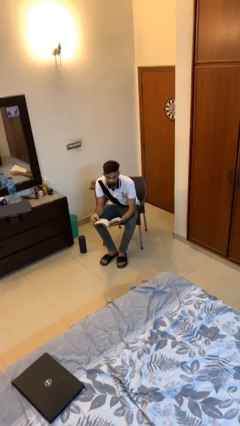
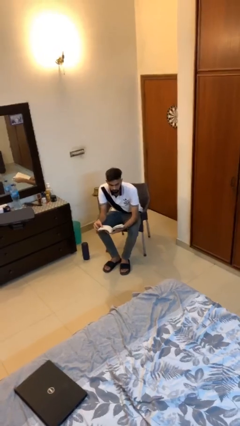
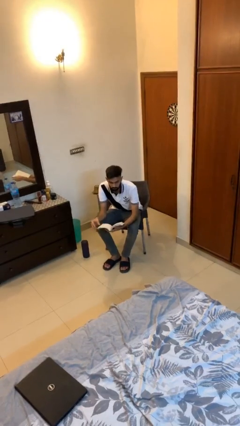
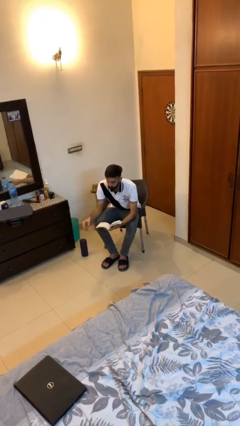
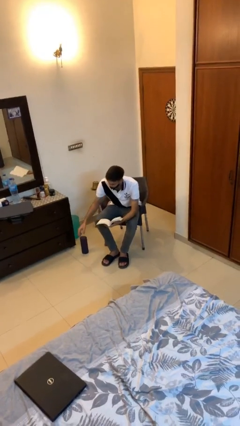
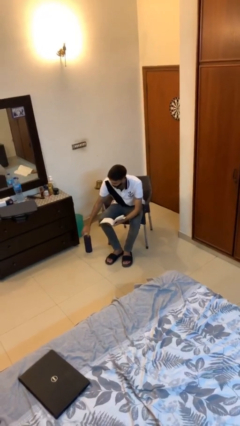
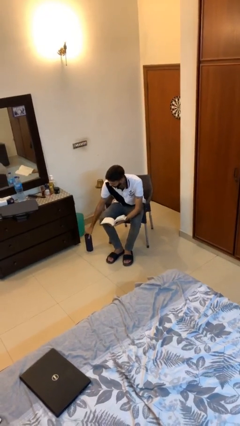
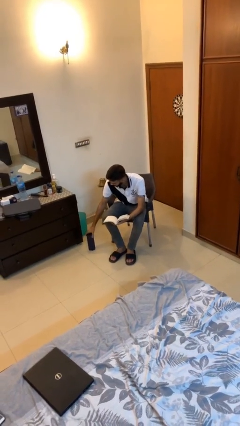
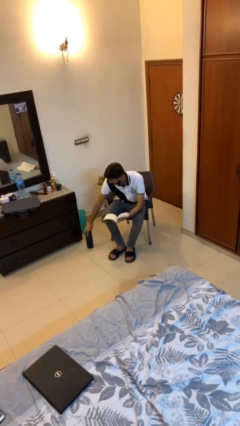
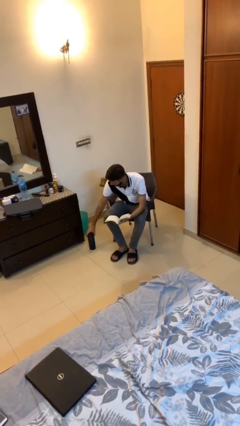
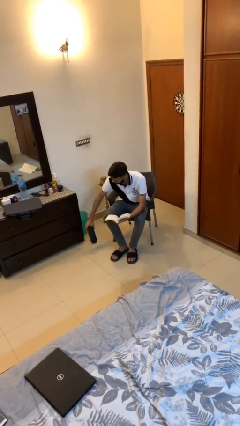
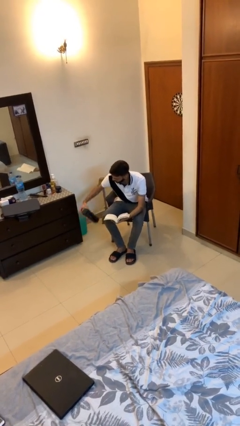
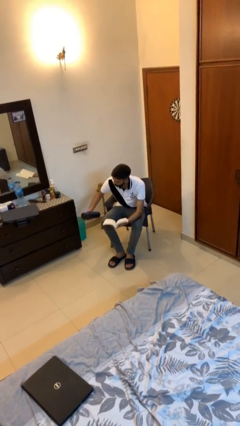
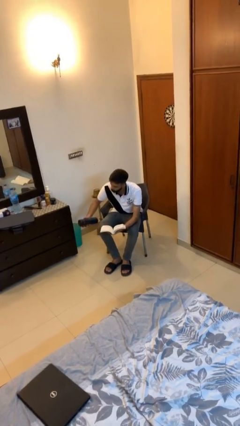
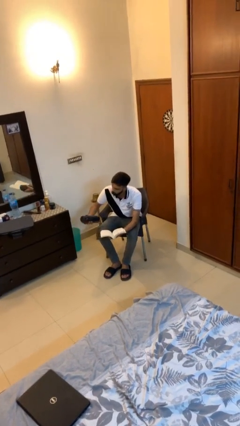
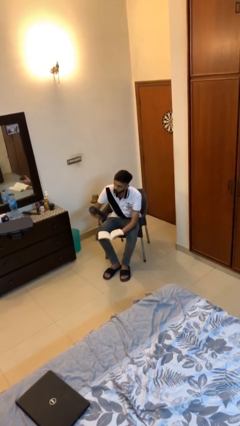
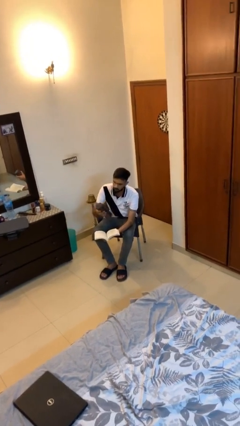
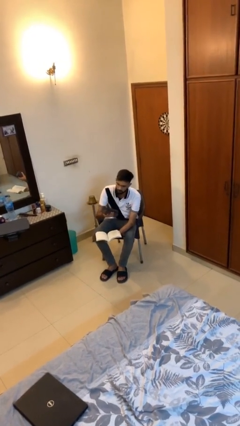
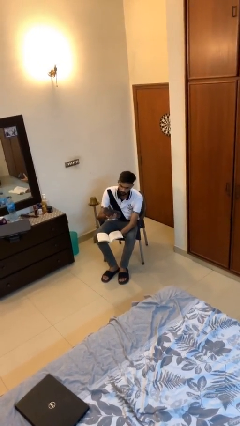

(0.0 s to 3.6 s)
person picks up object from floor

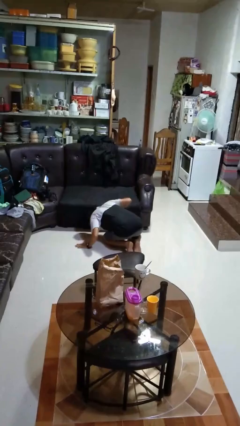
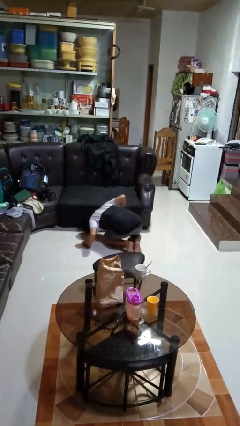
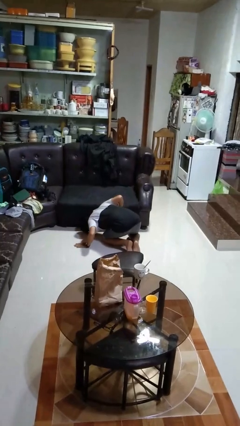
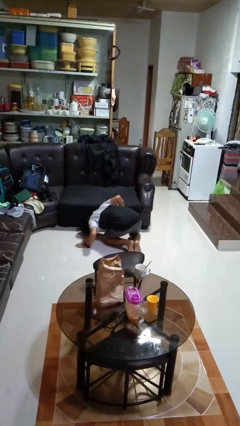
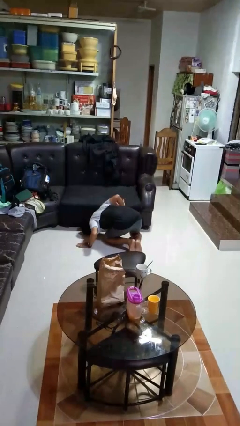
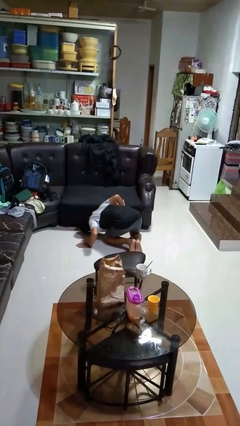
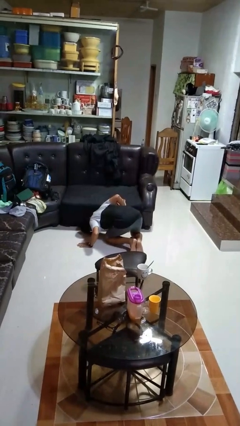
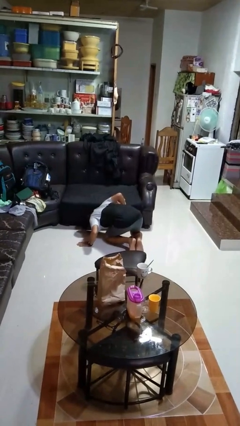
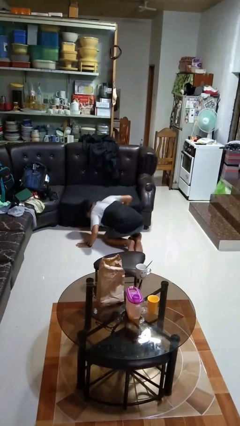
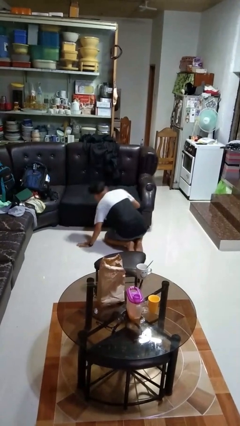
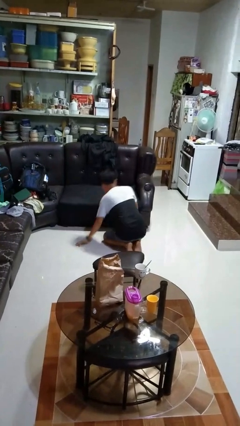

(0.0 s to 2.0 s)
person searches under couch

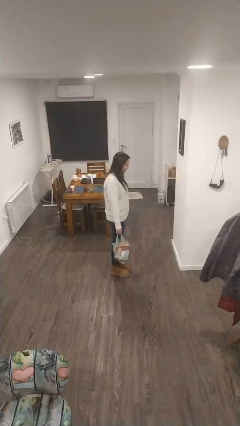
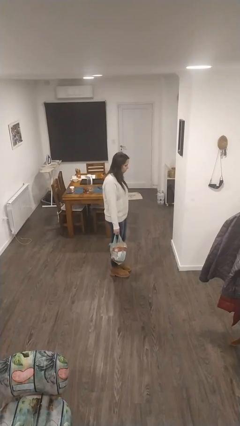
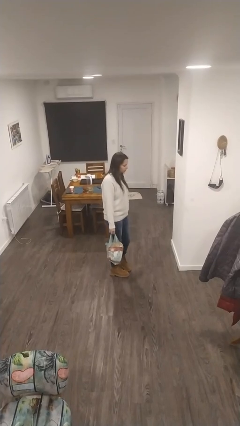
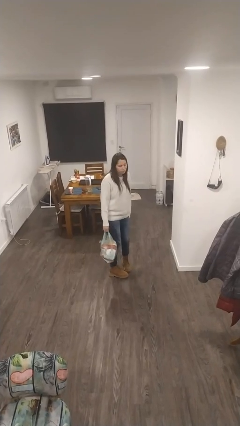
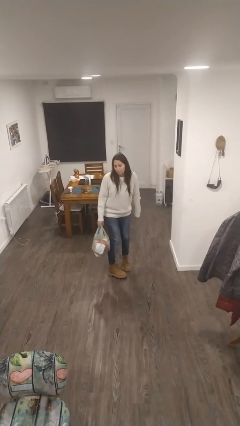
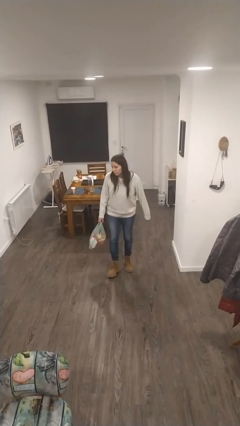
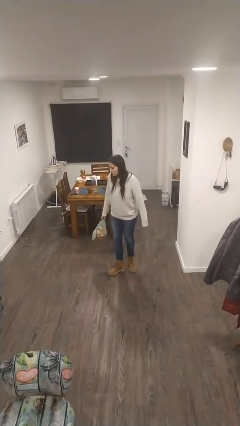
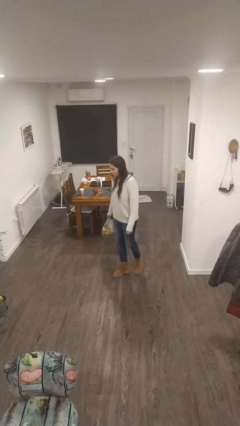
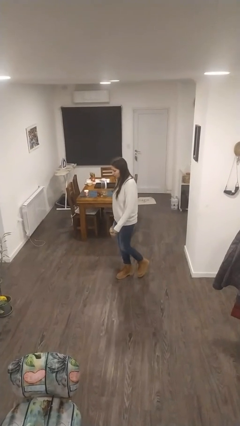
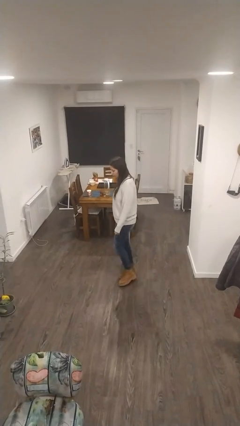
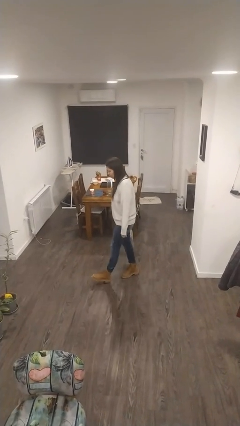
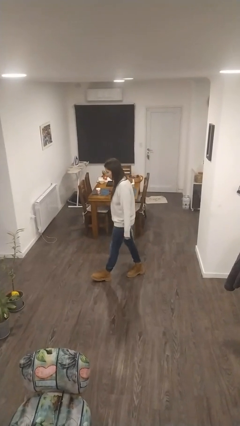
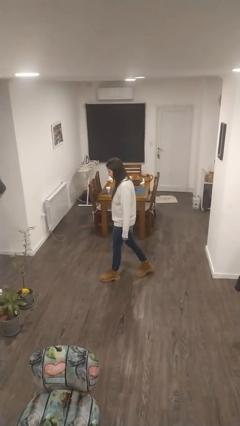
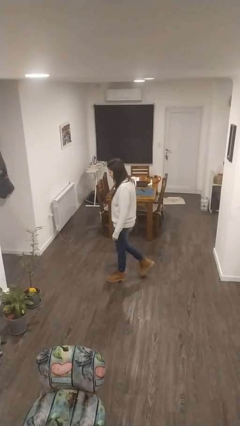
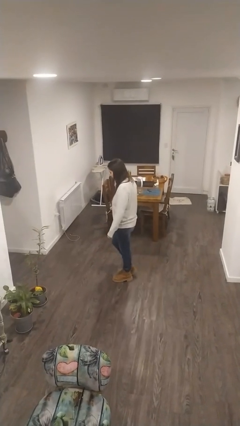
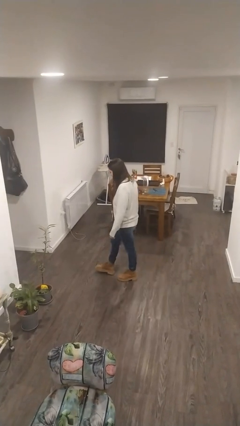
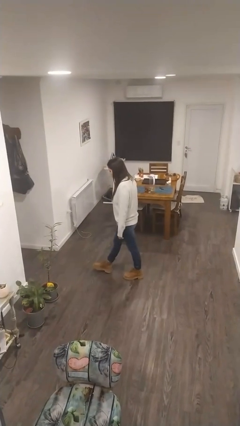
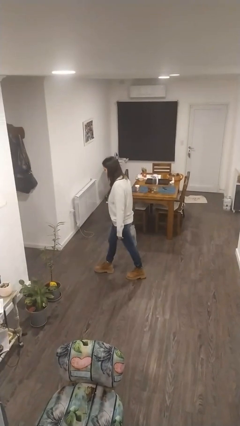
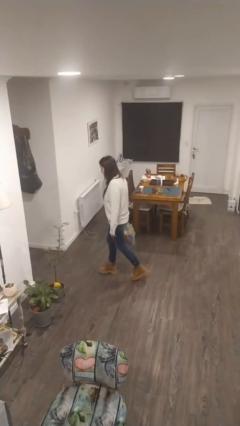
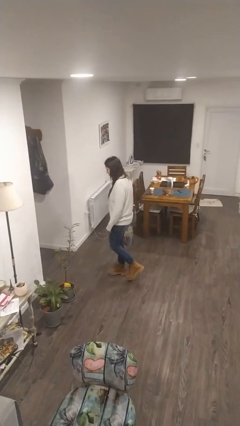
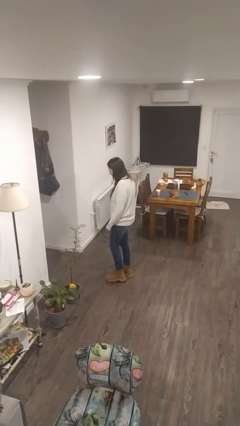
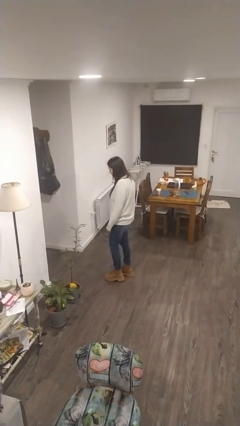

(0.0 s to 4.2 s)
person carries groceries

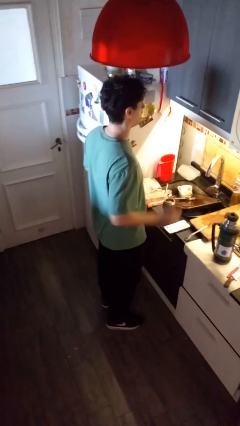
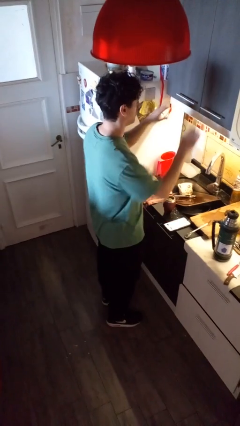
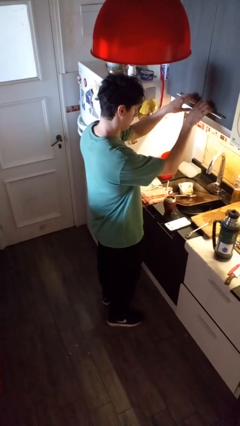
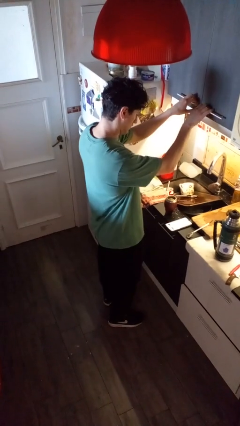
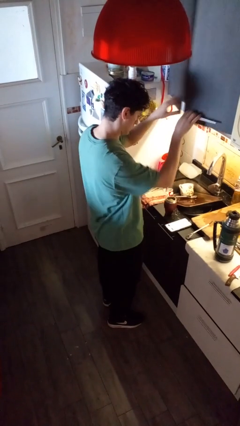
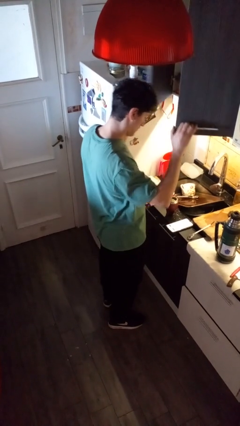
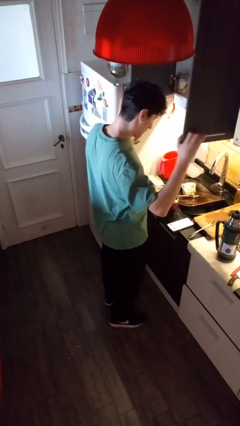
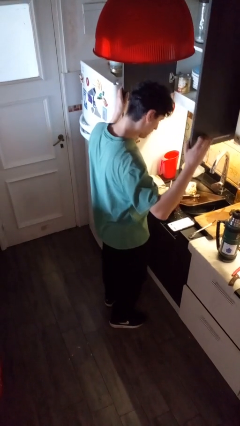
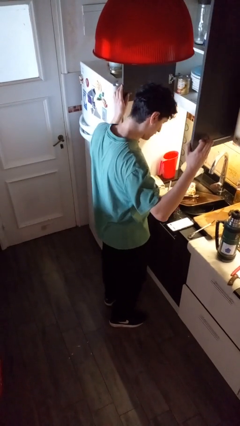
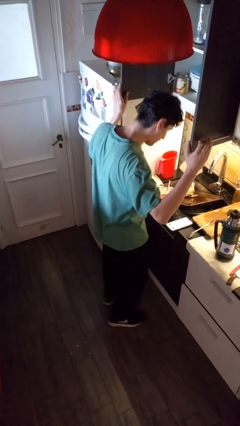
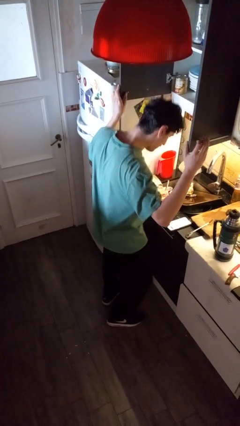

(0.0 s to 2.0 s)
person opens kitchen drawer

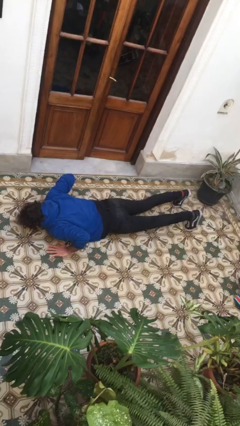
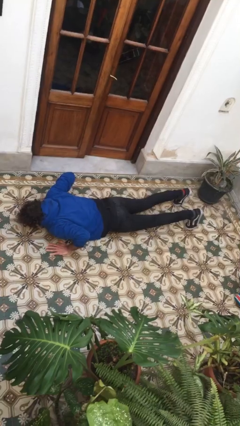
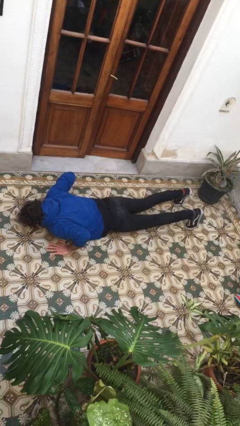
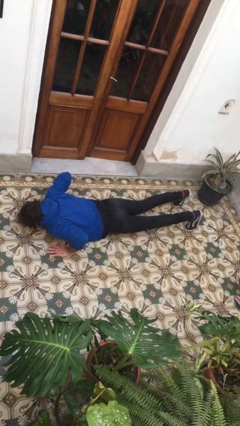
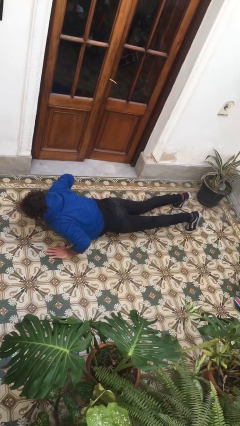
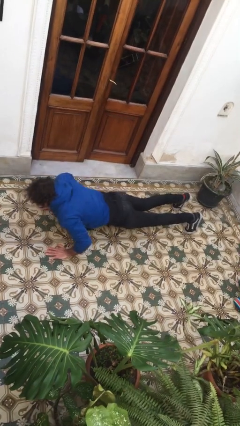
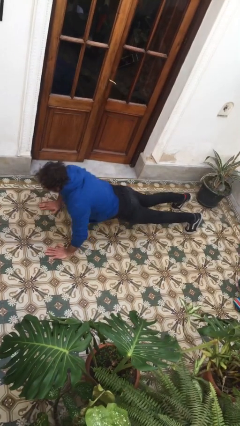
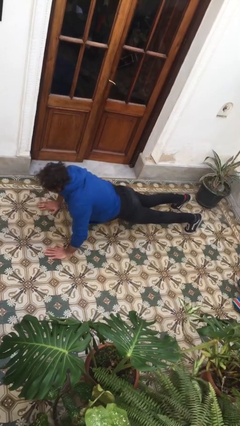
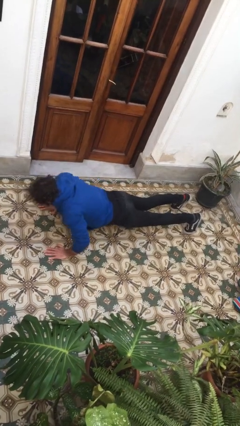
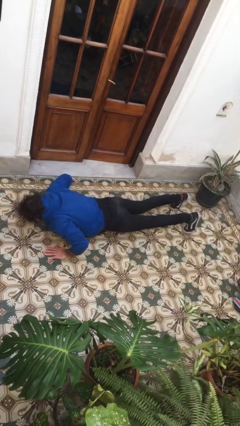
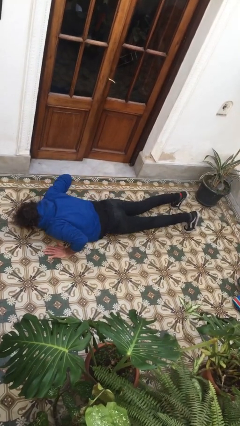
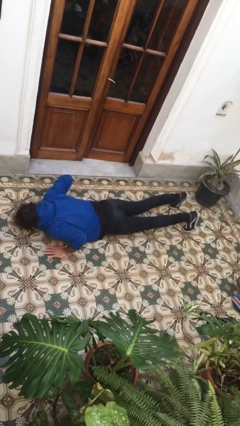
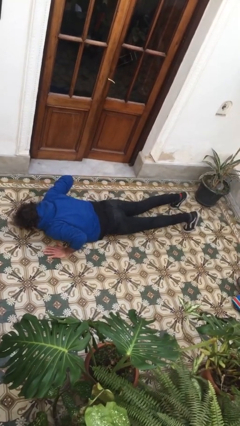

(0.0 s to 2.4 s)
person exercises with pushup

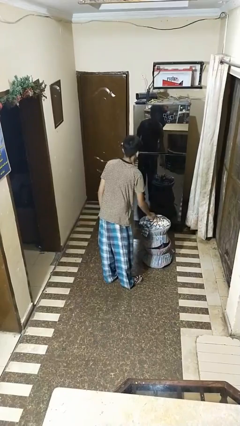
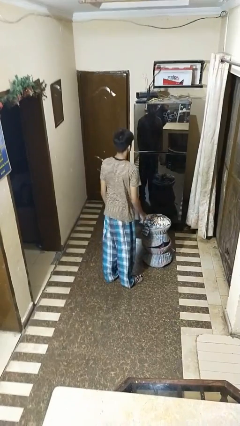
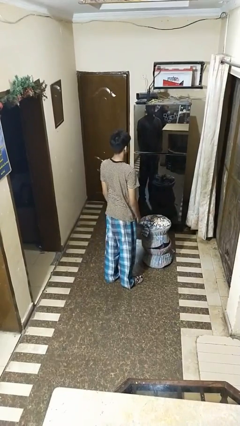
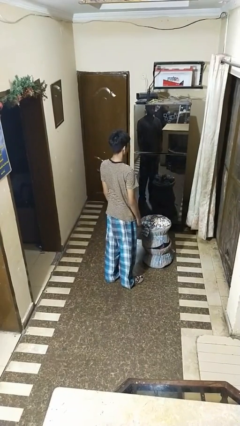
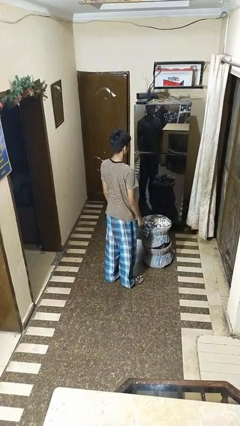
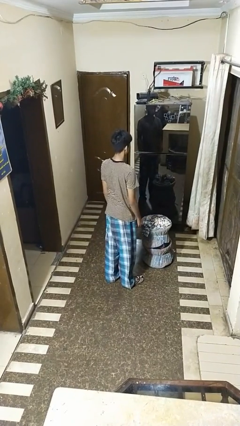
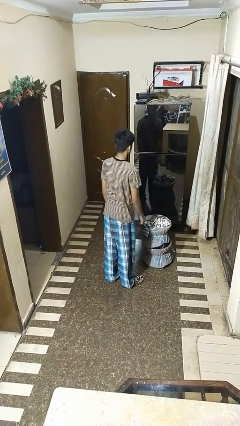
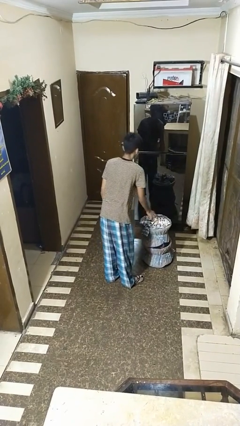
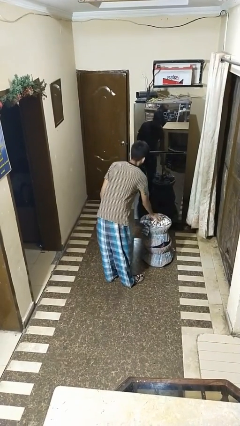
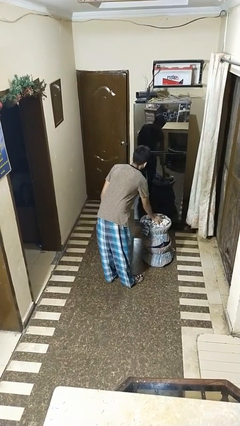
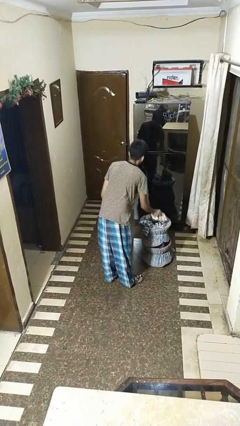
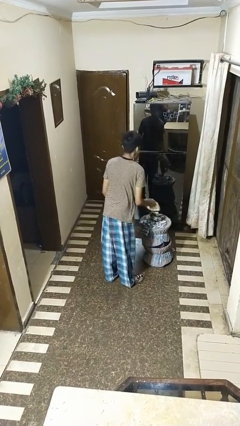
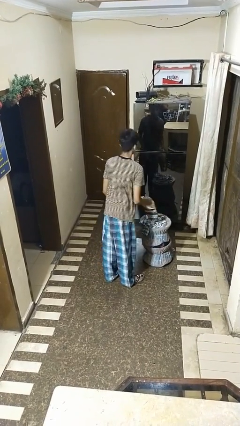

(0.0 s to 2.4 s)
person takes object from basket

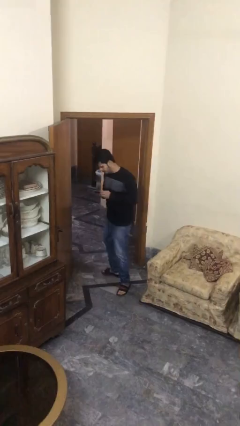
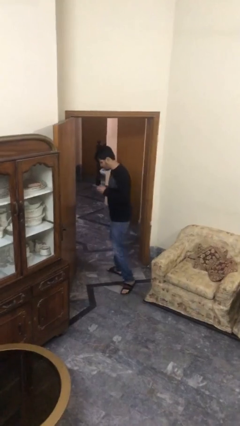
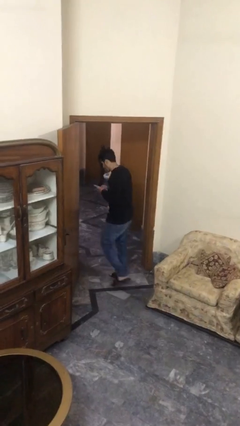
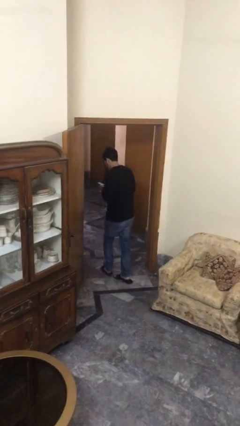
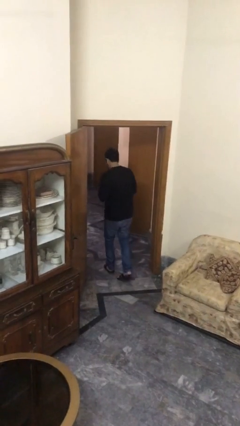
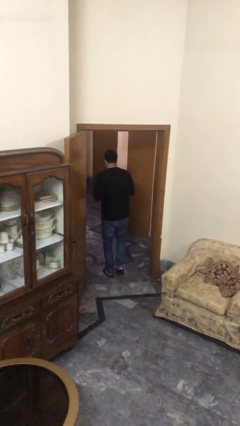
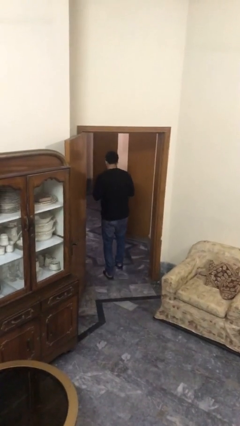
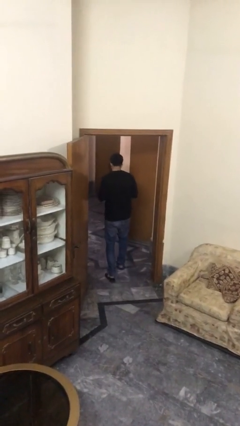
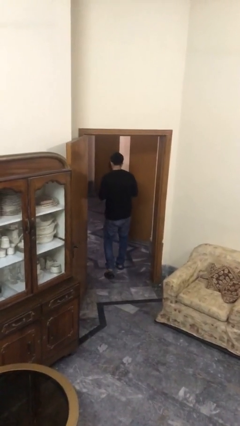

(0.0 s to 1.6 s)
person exits scene through structure
